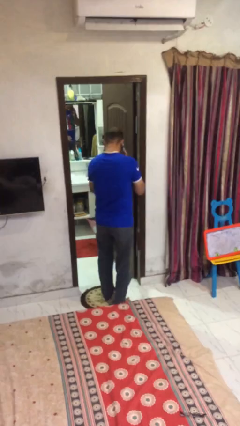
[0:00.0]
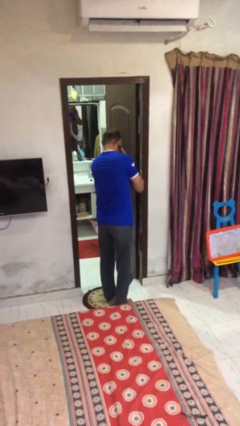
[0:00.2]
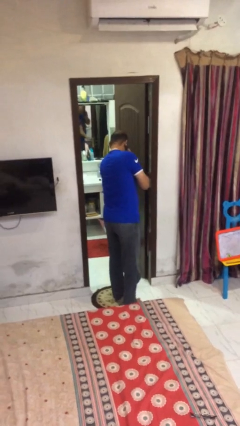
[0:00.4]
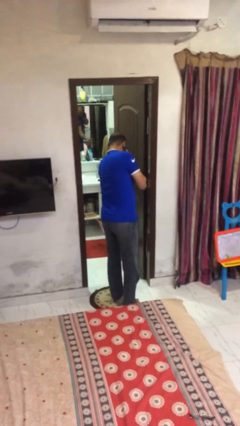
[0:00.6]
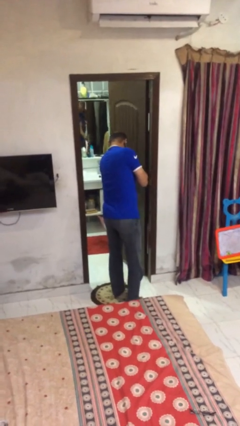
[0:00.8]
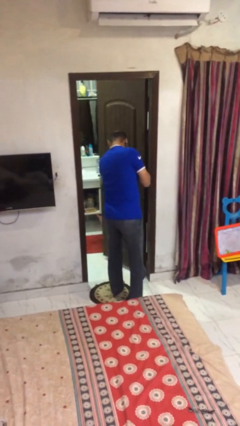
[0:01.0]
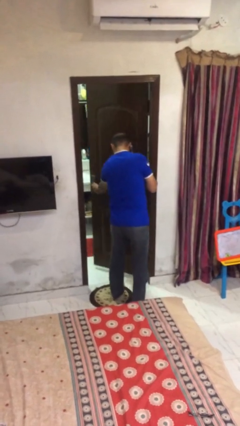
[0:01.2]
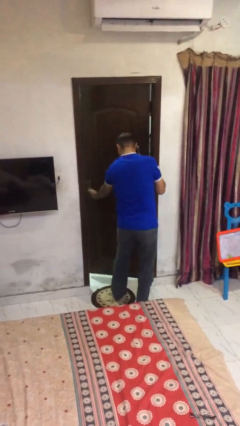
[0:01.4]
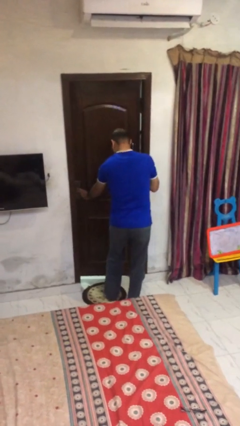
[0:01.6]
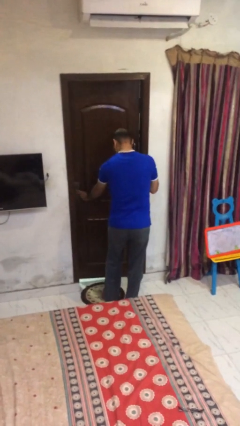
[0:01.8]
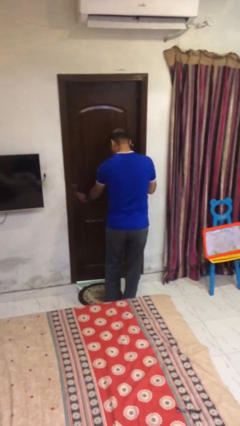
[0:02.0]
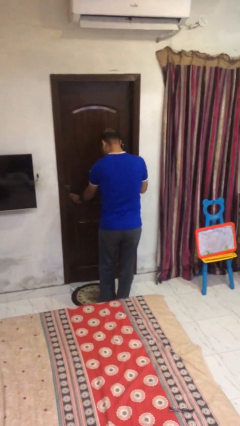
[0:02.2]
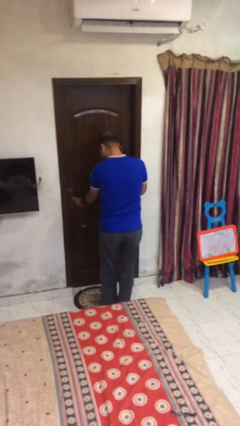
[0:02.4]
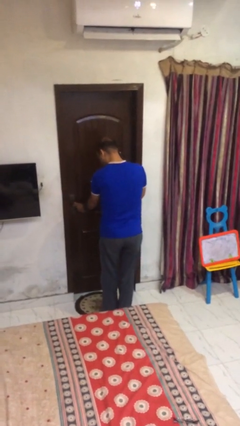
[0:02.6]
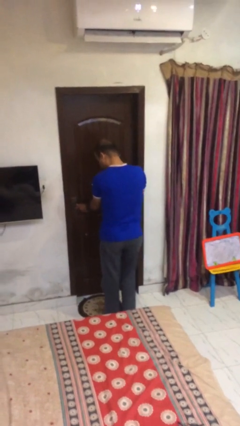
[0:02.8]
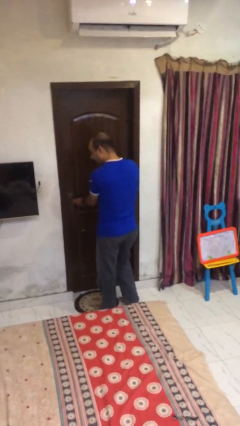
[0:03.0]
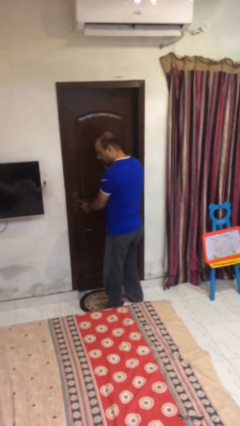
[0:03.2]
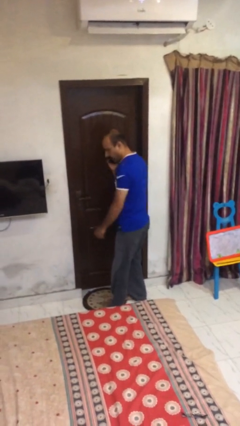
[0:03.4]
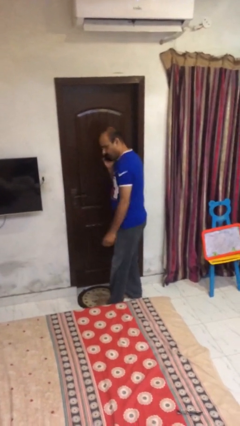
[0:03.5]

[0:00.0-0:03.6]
person closes facility door

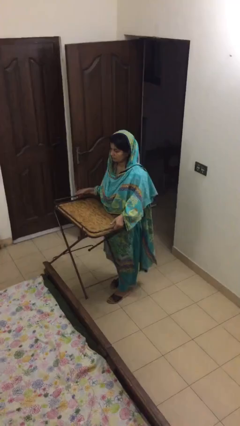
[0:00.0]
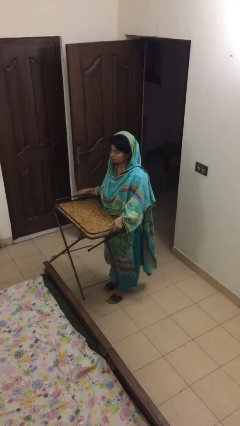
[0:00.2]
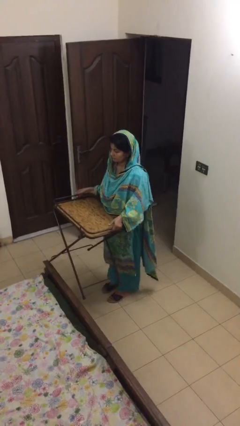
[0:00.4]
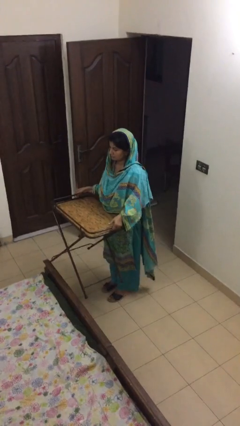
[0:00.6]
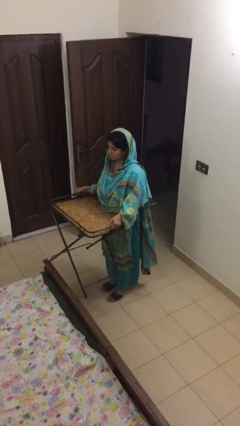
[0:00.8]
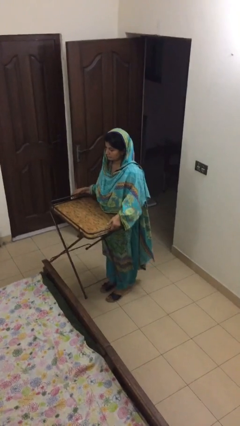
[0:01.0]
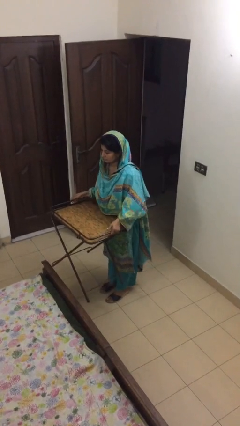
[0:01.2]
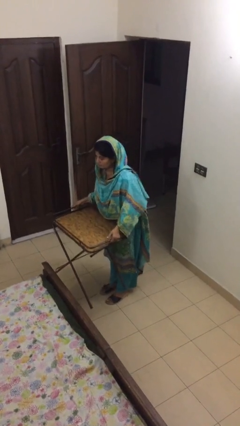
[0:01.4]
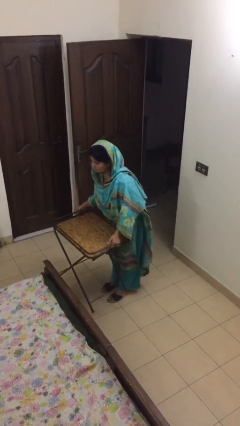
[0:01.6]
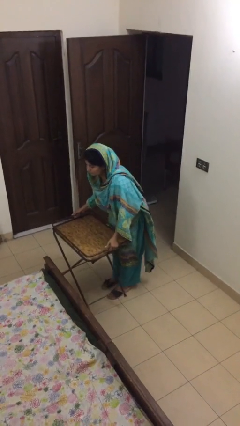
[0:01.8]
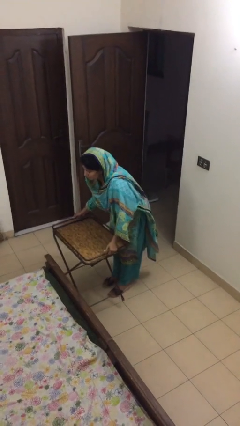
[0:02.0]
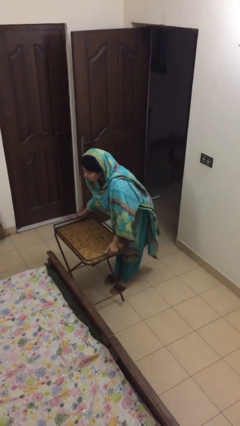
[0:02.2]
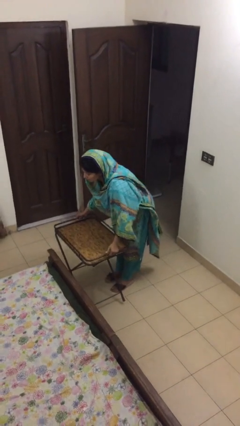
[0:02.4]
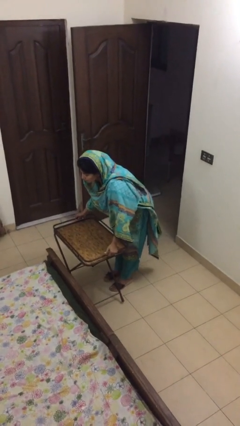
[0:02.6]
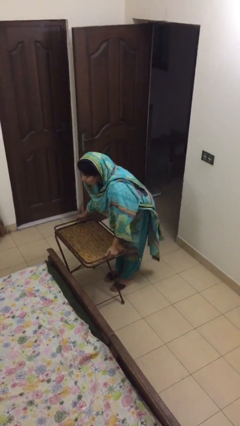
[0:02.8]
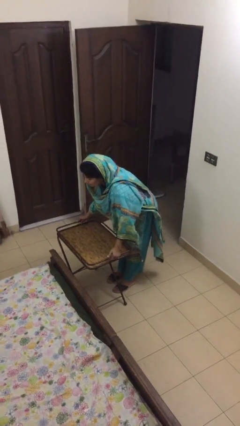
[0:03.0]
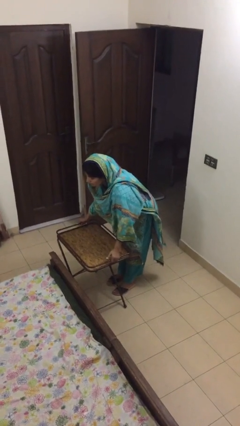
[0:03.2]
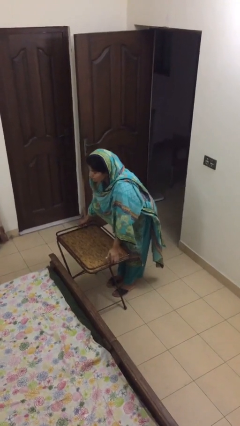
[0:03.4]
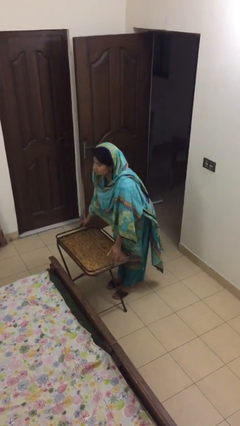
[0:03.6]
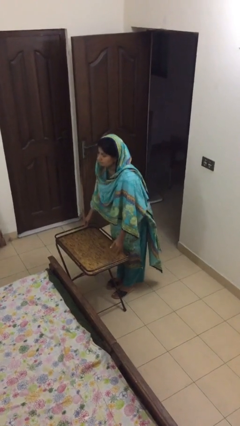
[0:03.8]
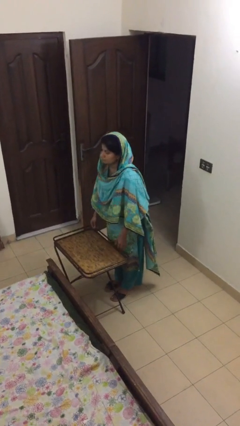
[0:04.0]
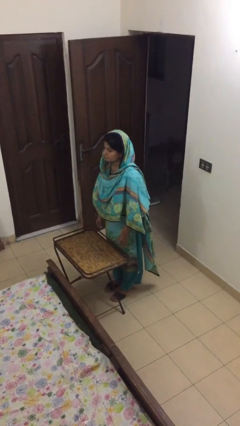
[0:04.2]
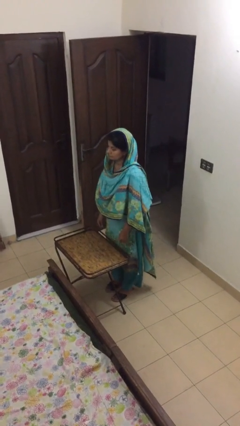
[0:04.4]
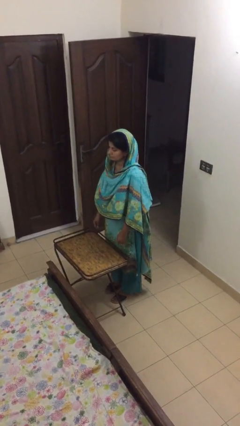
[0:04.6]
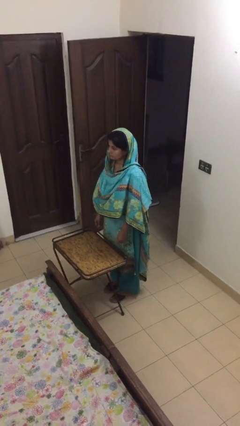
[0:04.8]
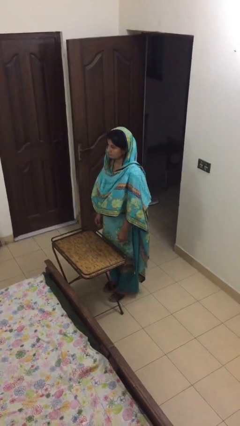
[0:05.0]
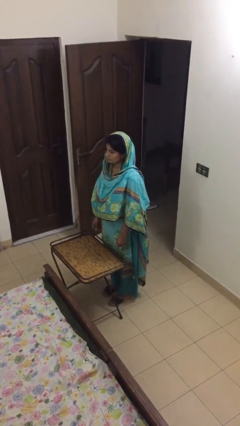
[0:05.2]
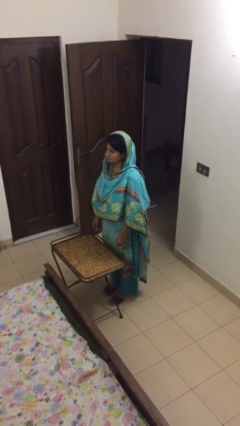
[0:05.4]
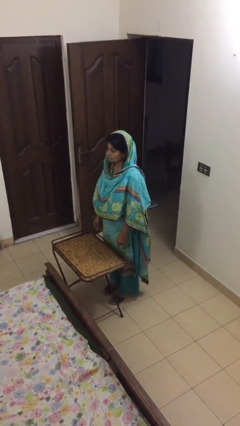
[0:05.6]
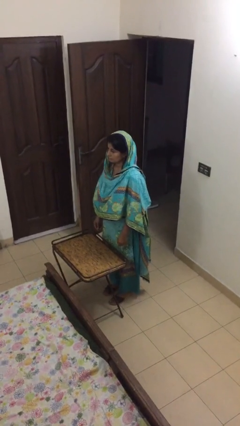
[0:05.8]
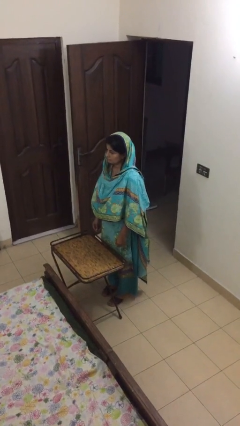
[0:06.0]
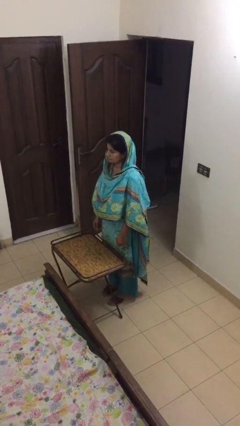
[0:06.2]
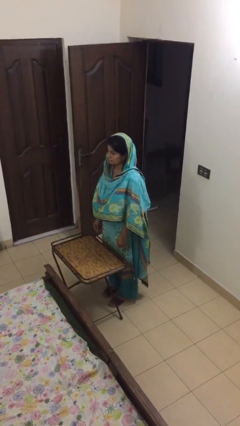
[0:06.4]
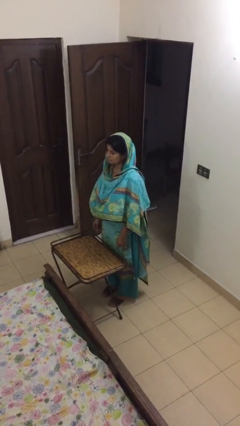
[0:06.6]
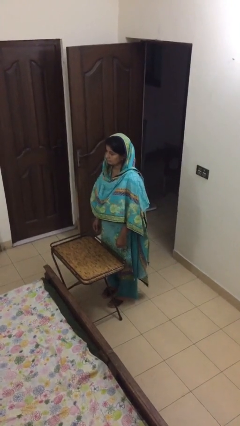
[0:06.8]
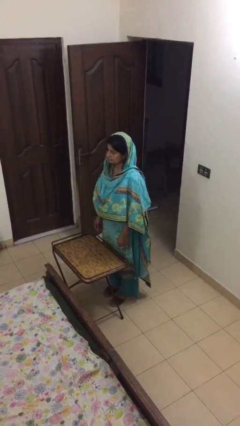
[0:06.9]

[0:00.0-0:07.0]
person puts down object on floor

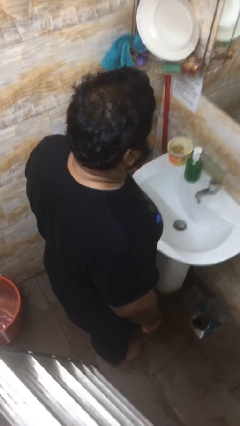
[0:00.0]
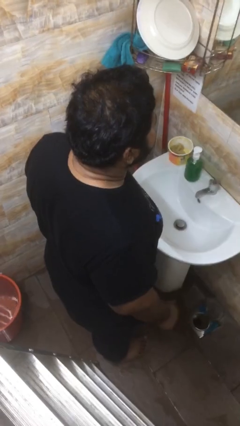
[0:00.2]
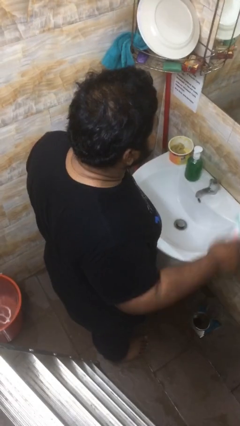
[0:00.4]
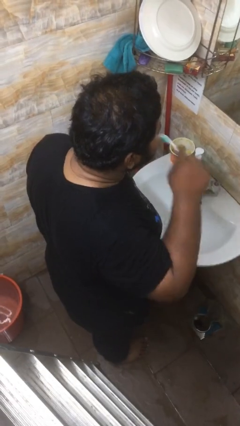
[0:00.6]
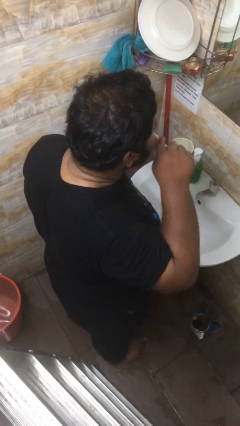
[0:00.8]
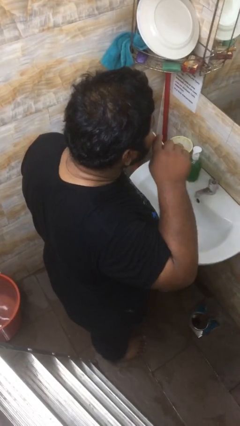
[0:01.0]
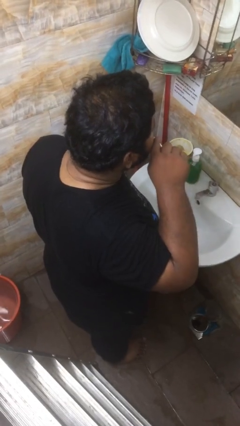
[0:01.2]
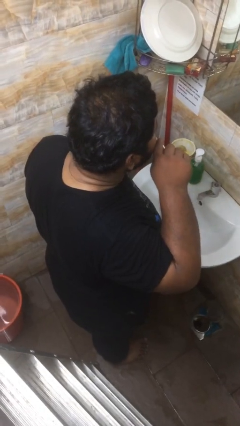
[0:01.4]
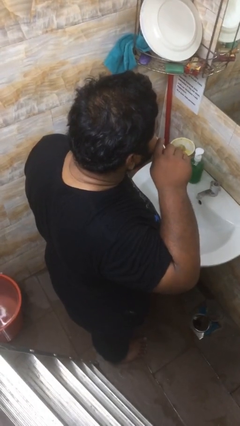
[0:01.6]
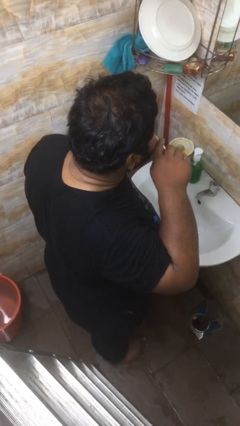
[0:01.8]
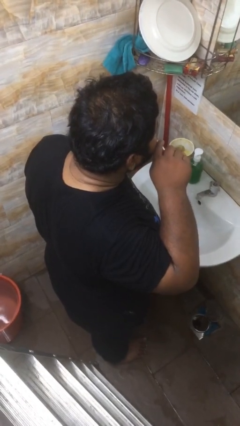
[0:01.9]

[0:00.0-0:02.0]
person brushes teeth

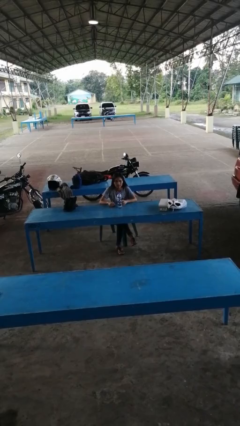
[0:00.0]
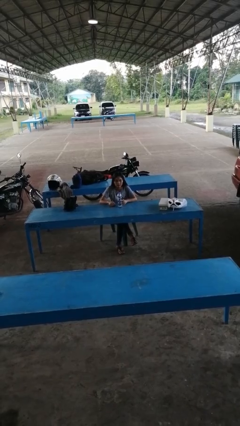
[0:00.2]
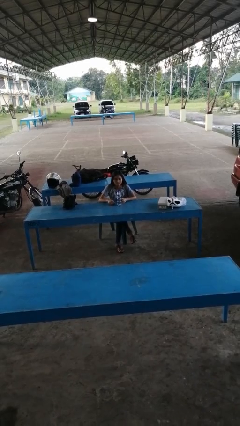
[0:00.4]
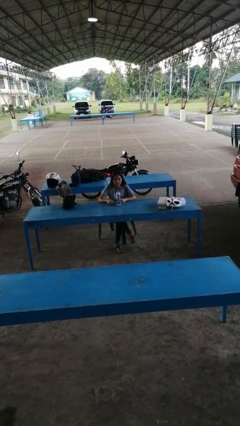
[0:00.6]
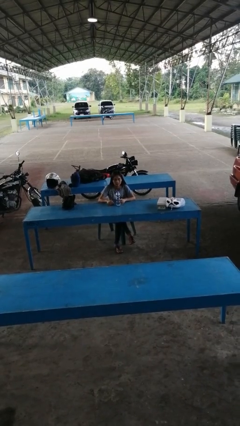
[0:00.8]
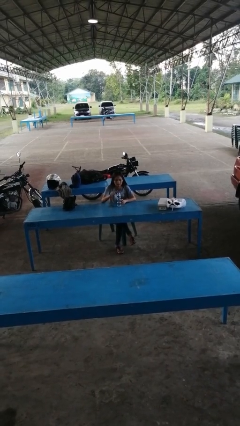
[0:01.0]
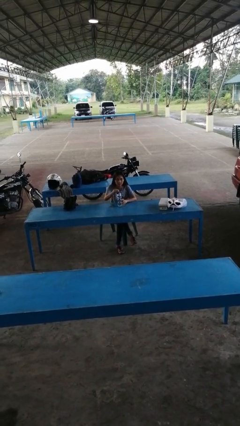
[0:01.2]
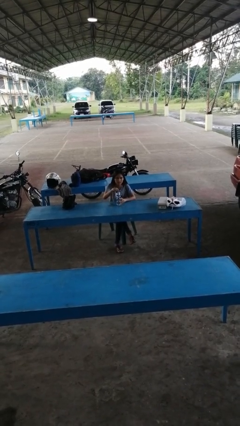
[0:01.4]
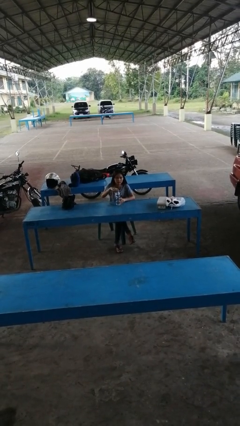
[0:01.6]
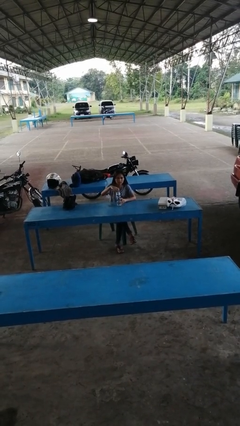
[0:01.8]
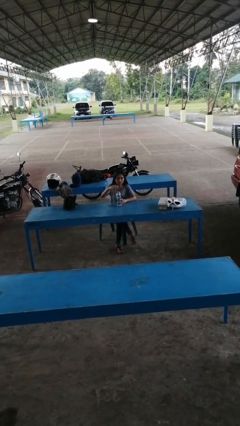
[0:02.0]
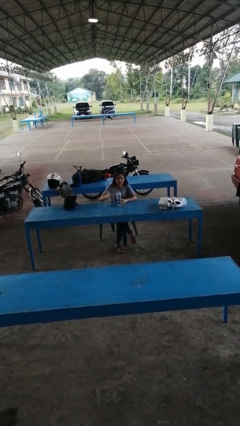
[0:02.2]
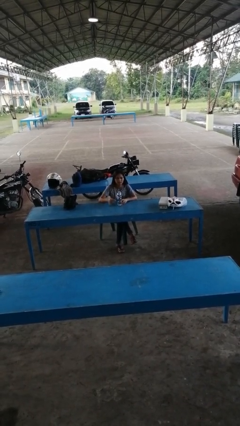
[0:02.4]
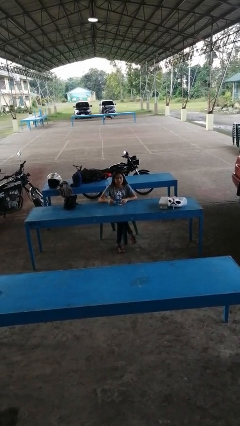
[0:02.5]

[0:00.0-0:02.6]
person unscrews lid from bottle

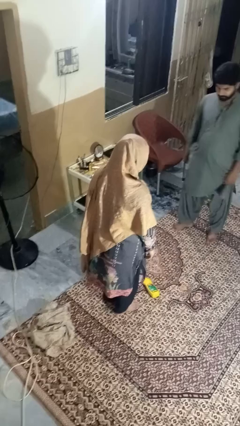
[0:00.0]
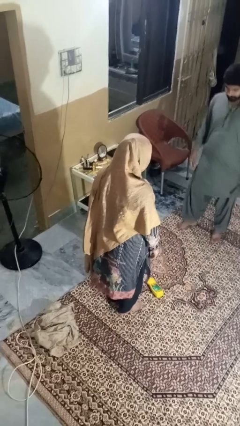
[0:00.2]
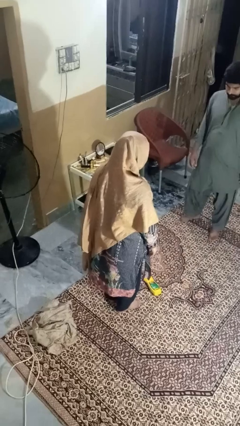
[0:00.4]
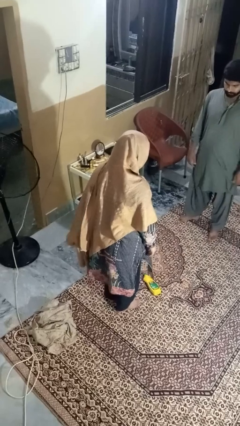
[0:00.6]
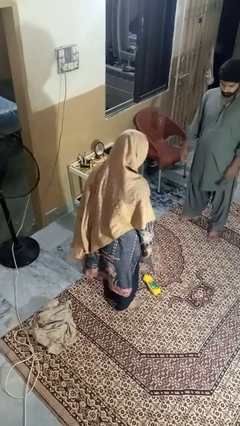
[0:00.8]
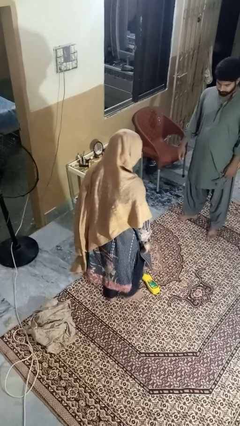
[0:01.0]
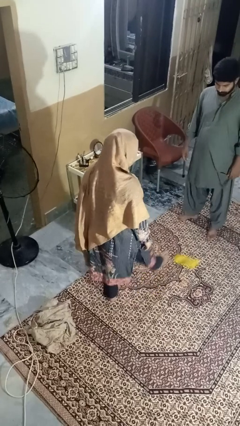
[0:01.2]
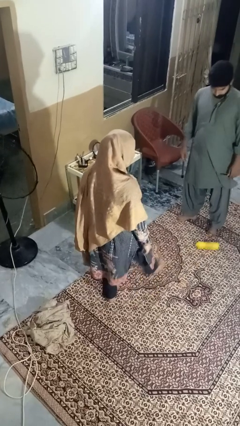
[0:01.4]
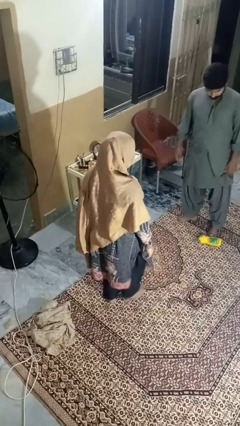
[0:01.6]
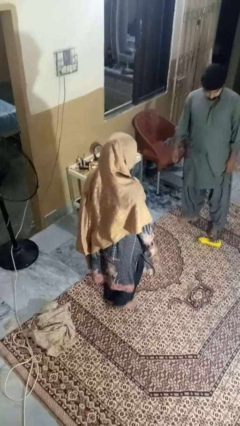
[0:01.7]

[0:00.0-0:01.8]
person kicks object to person

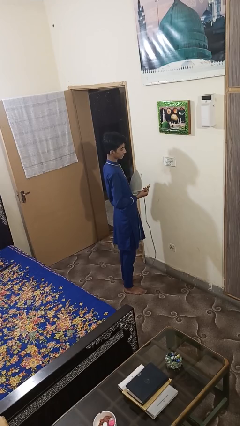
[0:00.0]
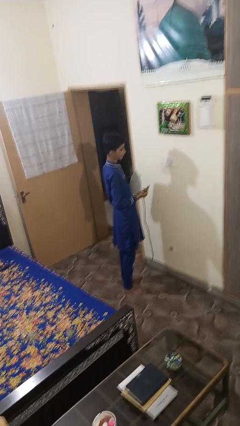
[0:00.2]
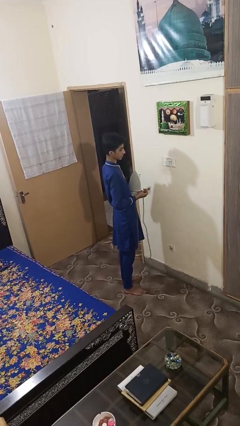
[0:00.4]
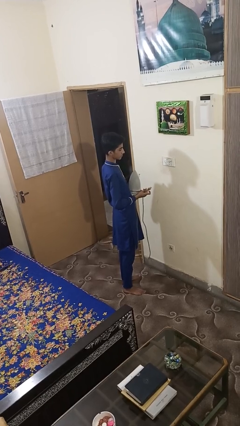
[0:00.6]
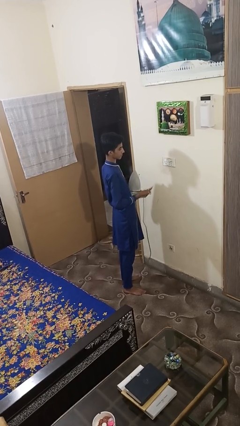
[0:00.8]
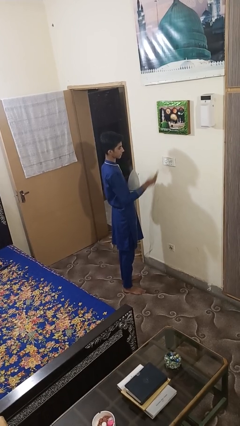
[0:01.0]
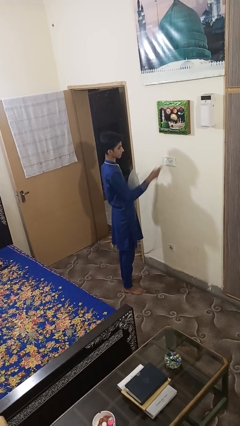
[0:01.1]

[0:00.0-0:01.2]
person plugs into electrical socket
